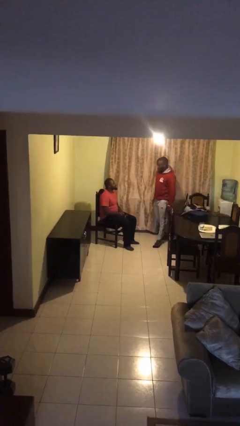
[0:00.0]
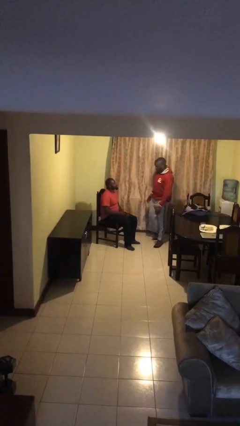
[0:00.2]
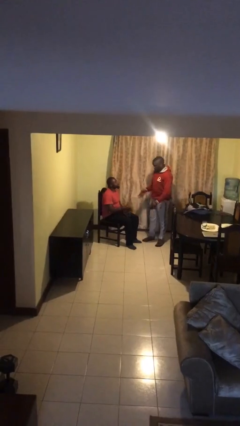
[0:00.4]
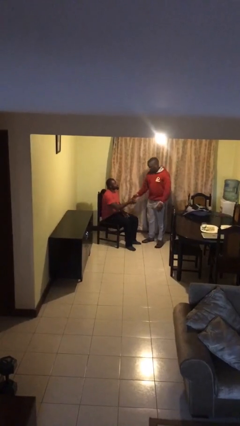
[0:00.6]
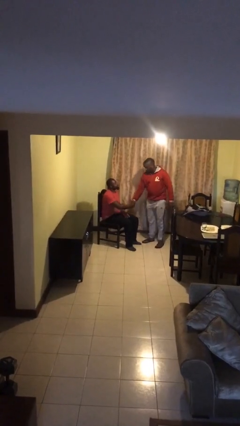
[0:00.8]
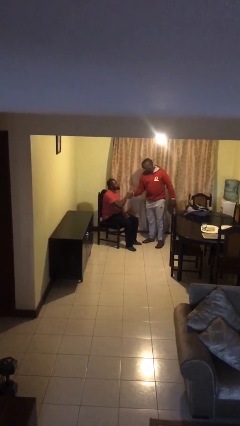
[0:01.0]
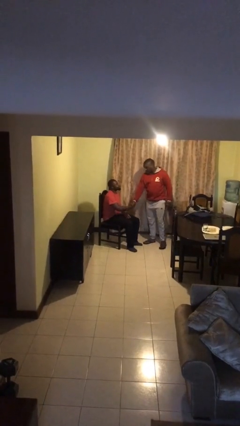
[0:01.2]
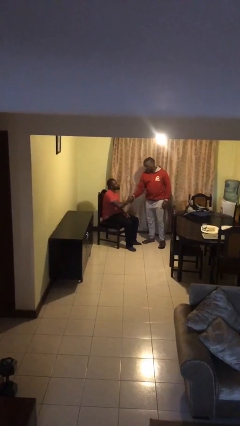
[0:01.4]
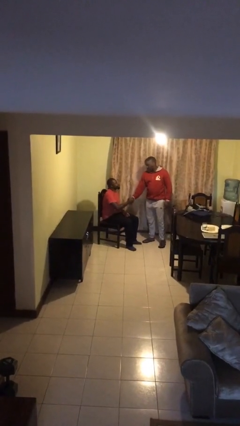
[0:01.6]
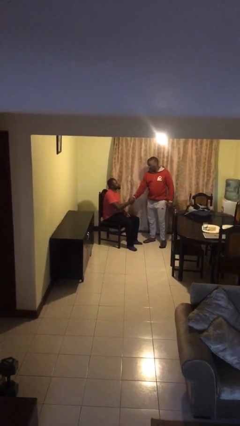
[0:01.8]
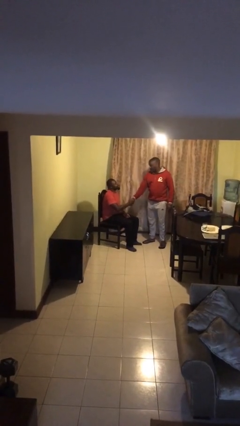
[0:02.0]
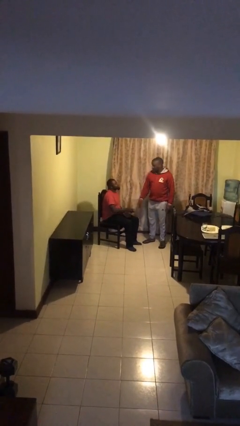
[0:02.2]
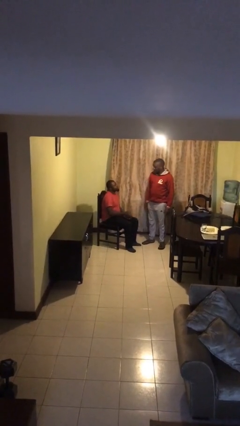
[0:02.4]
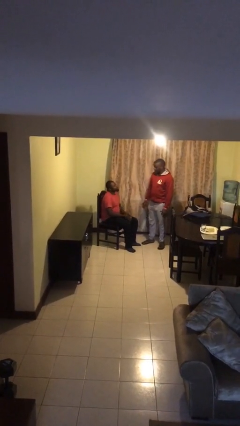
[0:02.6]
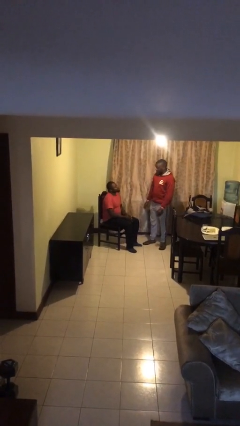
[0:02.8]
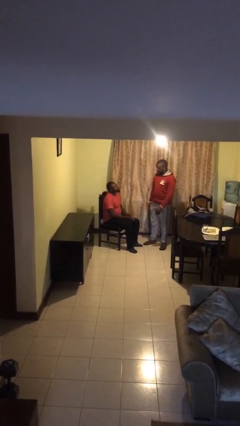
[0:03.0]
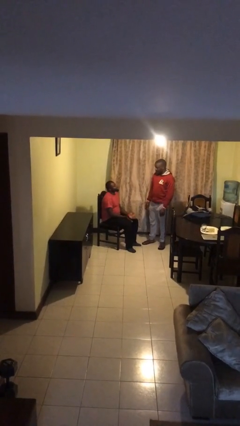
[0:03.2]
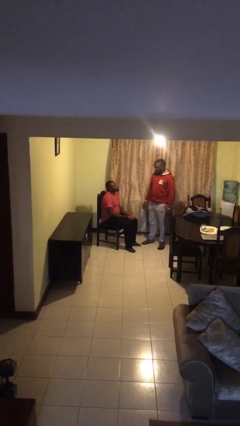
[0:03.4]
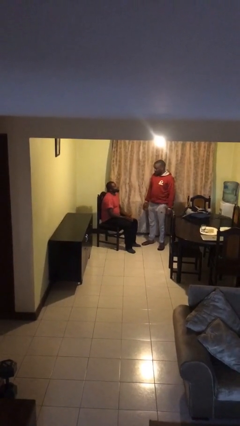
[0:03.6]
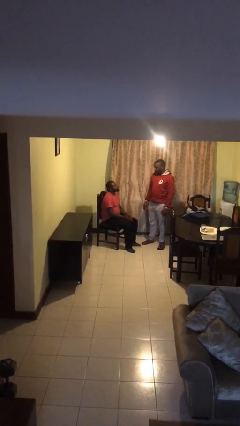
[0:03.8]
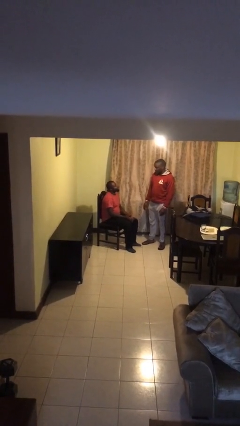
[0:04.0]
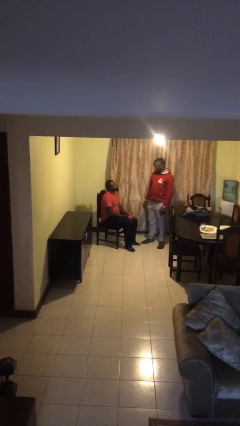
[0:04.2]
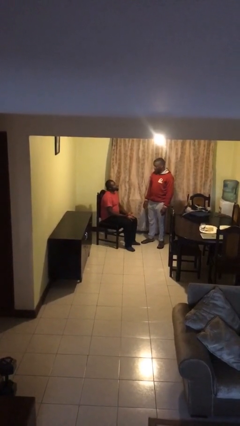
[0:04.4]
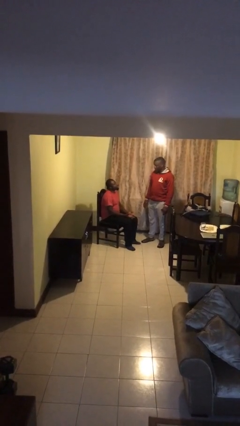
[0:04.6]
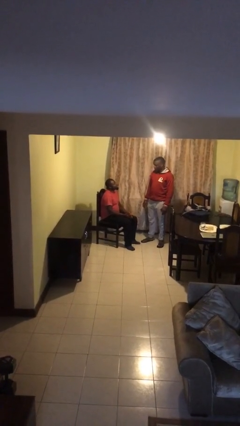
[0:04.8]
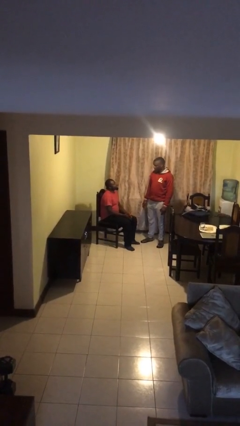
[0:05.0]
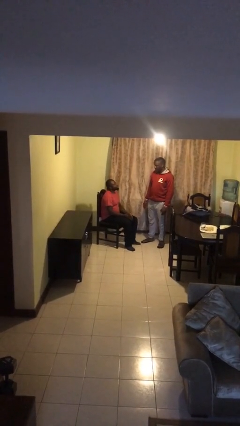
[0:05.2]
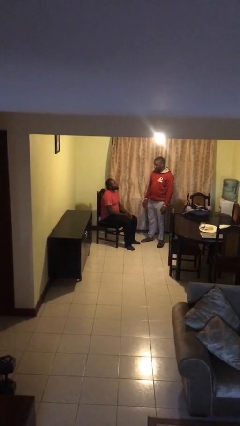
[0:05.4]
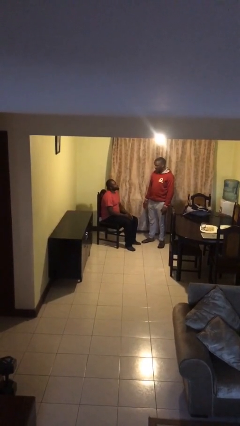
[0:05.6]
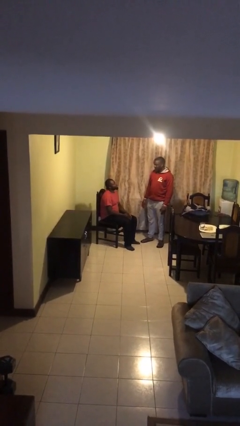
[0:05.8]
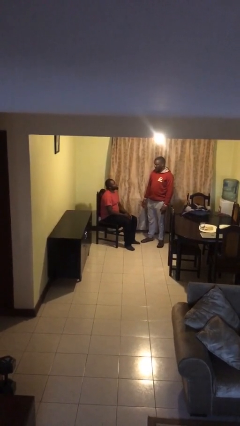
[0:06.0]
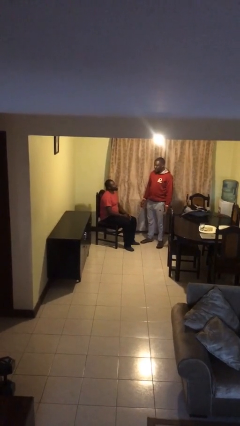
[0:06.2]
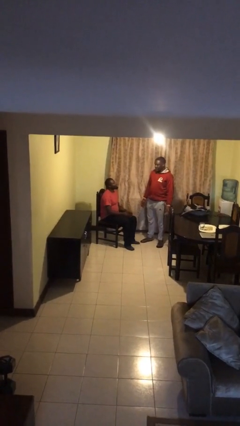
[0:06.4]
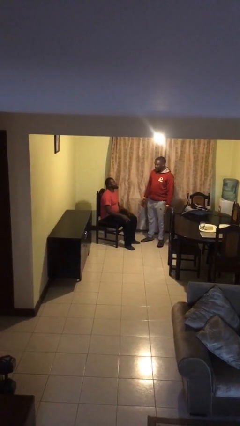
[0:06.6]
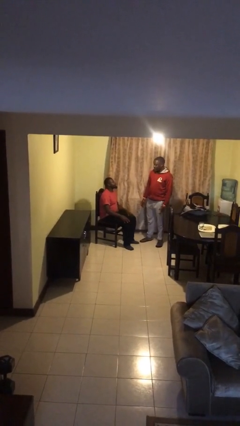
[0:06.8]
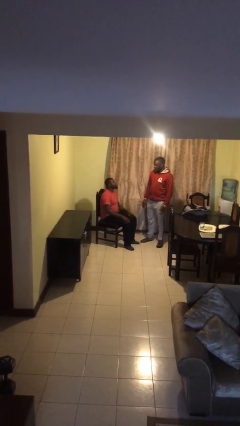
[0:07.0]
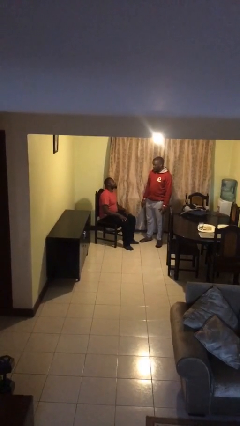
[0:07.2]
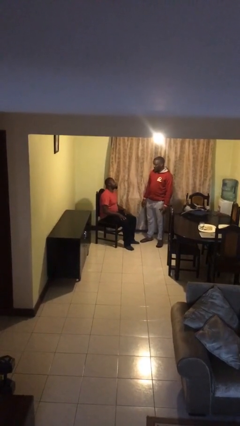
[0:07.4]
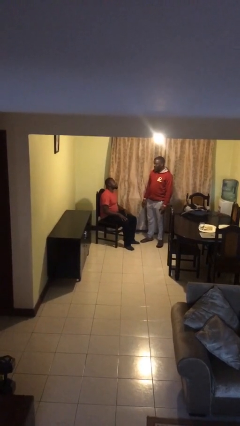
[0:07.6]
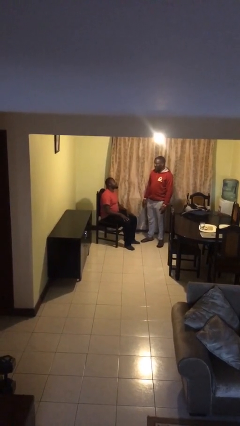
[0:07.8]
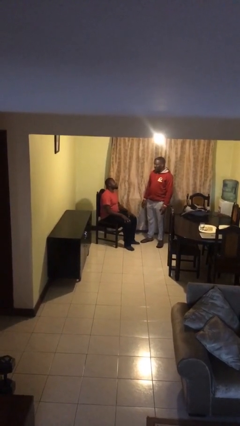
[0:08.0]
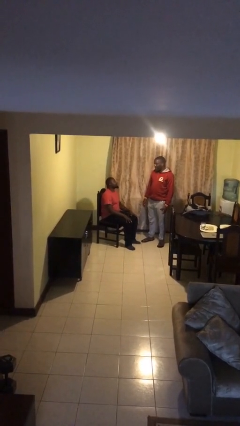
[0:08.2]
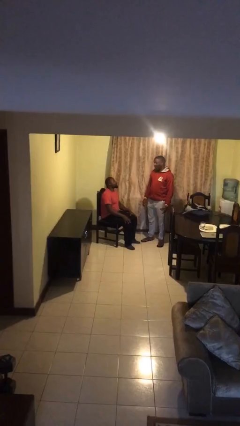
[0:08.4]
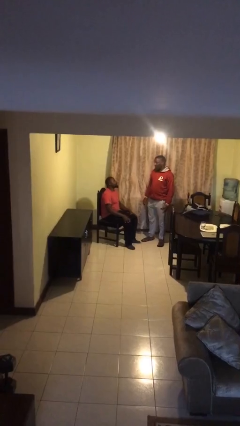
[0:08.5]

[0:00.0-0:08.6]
person shakes hand

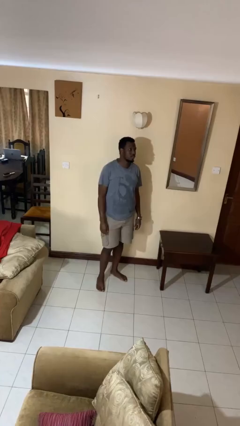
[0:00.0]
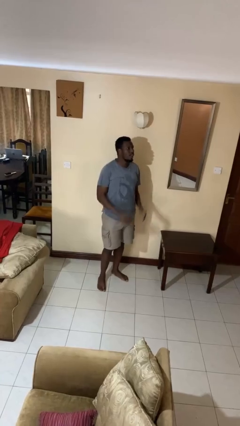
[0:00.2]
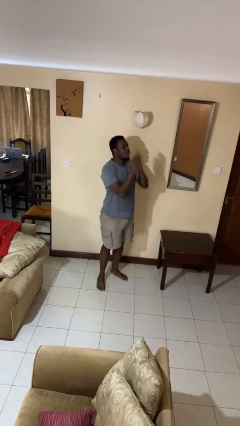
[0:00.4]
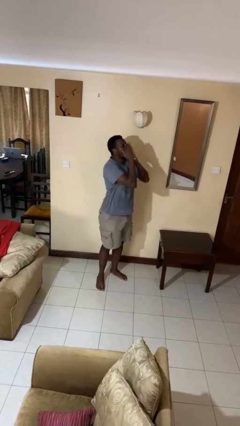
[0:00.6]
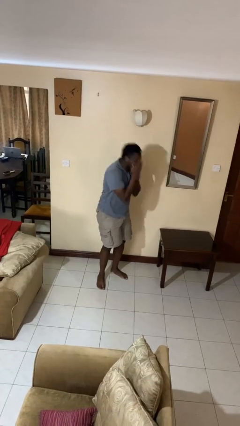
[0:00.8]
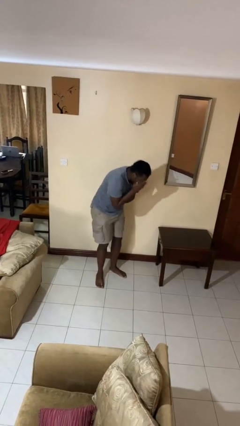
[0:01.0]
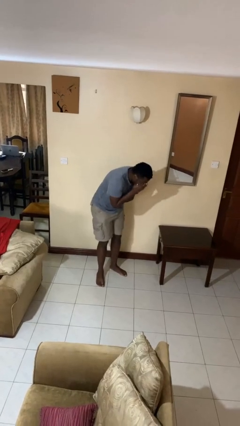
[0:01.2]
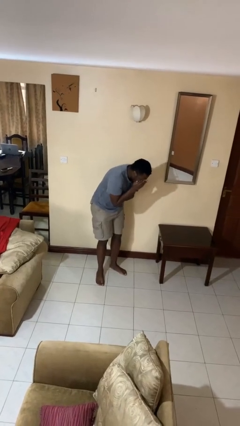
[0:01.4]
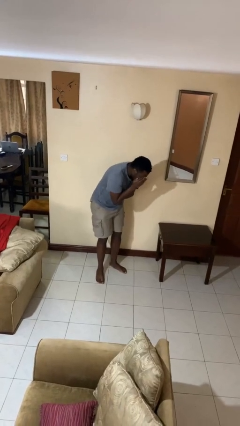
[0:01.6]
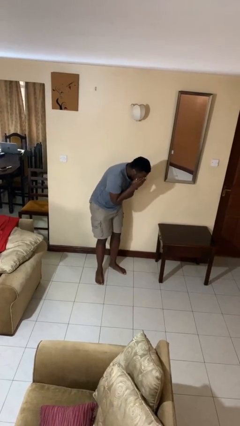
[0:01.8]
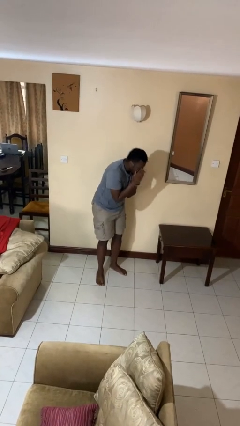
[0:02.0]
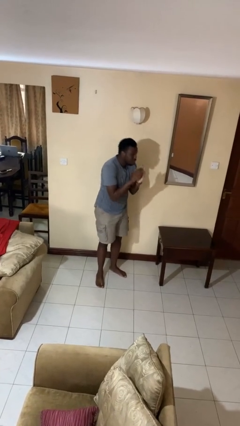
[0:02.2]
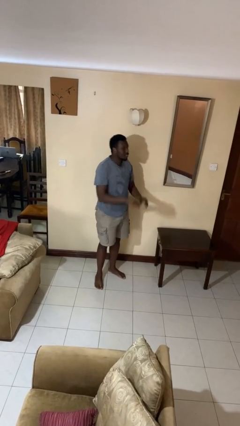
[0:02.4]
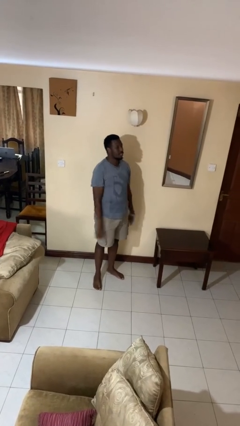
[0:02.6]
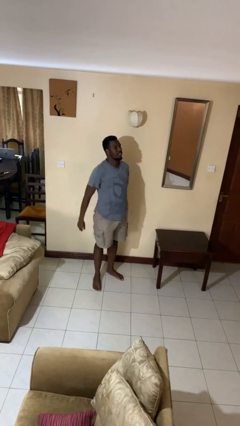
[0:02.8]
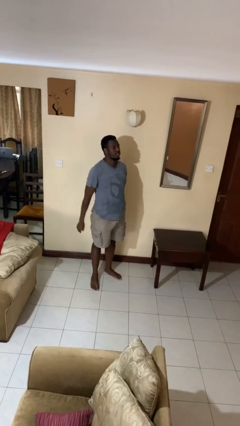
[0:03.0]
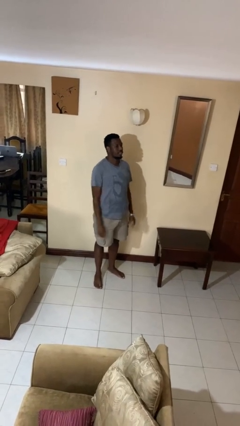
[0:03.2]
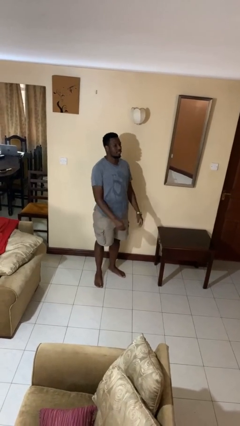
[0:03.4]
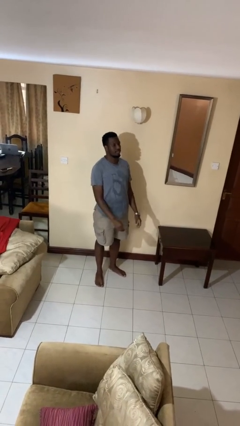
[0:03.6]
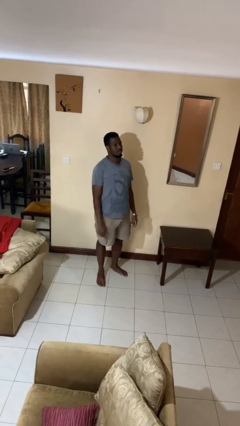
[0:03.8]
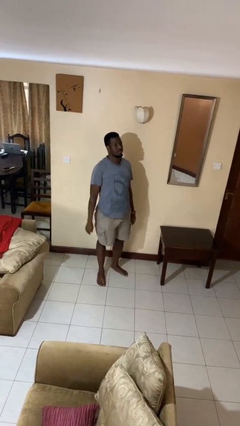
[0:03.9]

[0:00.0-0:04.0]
person sneezes into hand

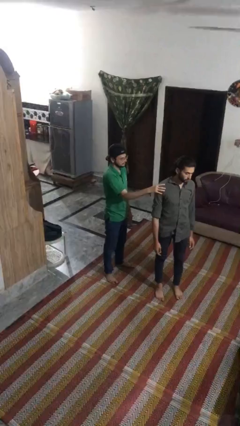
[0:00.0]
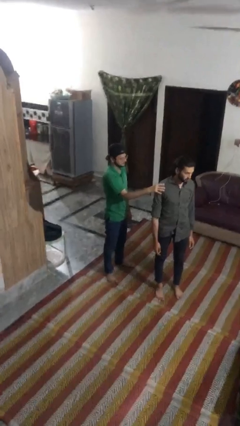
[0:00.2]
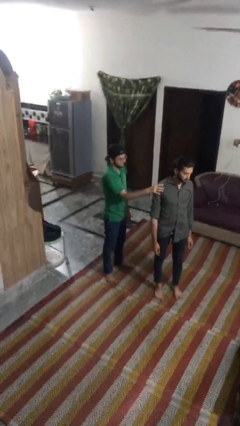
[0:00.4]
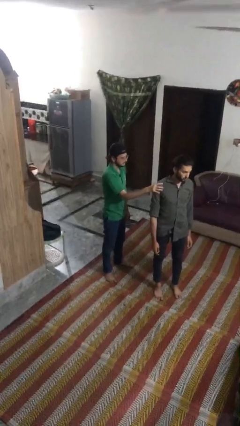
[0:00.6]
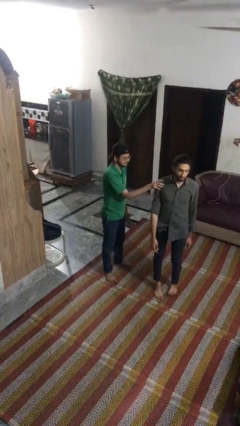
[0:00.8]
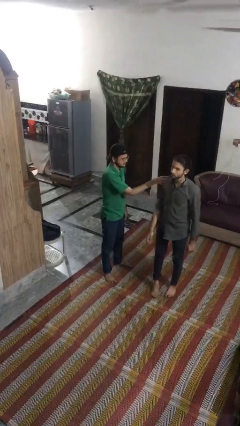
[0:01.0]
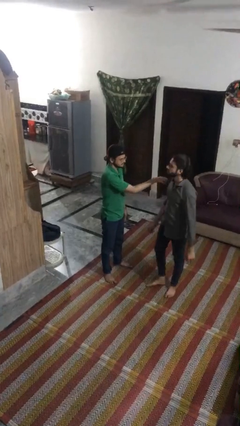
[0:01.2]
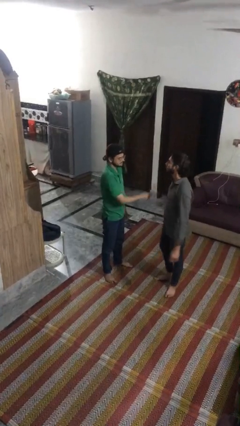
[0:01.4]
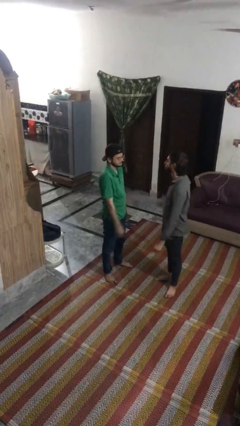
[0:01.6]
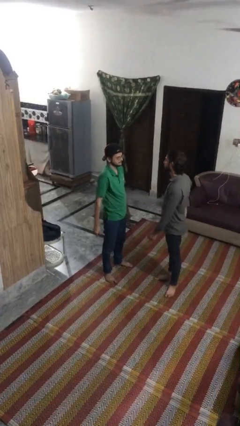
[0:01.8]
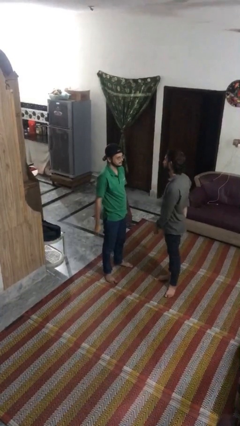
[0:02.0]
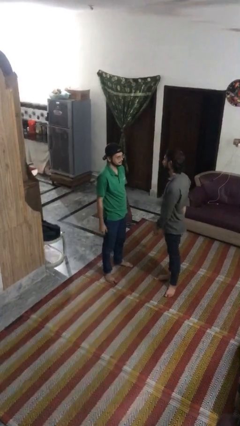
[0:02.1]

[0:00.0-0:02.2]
person spins person around

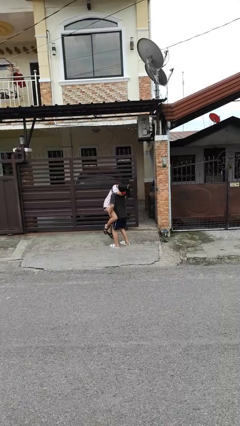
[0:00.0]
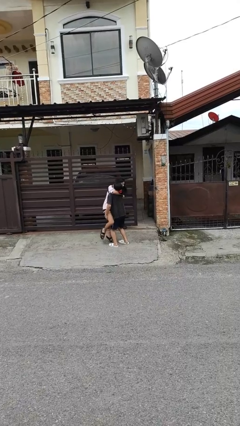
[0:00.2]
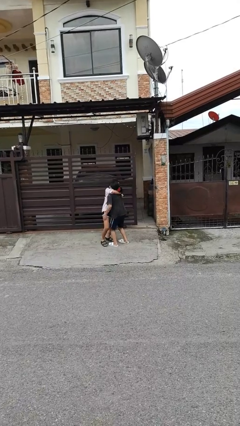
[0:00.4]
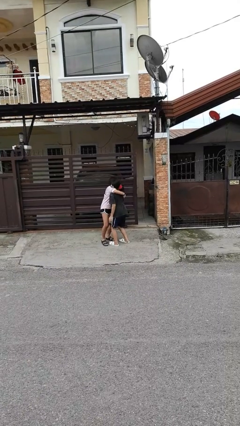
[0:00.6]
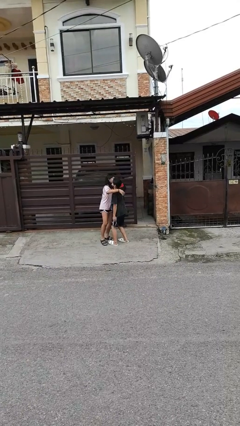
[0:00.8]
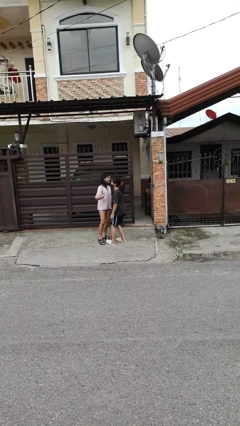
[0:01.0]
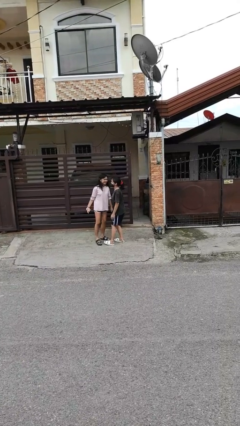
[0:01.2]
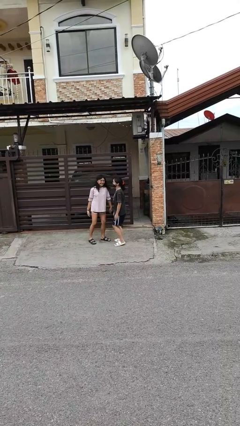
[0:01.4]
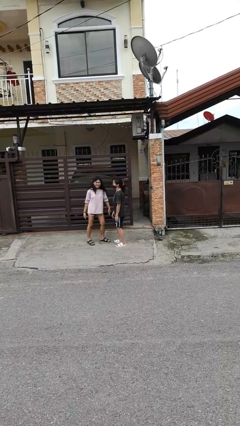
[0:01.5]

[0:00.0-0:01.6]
person puts down person

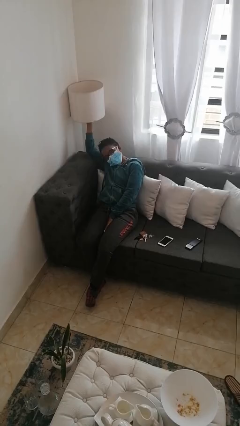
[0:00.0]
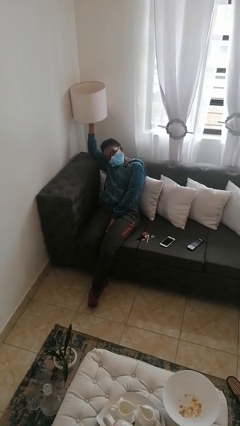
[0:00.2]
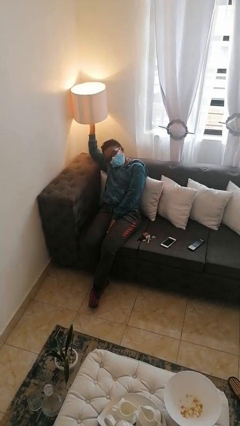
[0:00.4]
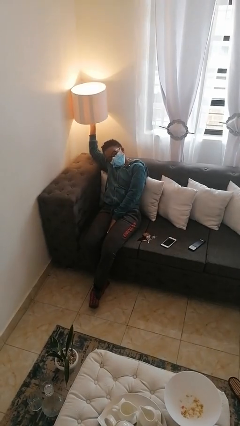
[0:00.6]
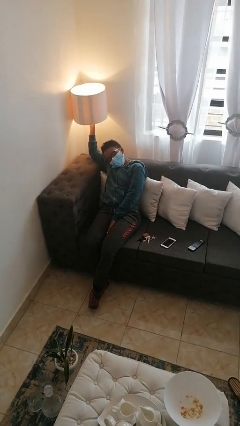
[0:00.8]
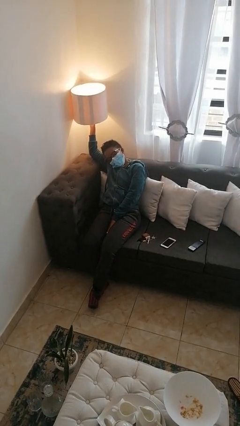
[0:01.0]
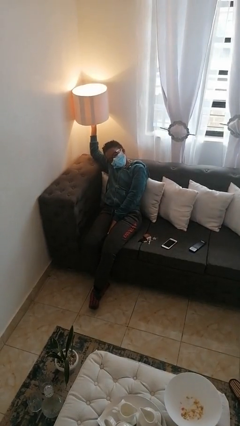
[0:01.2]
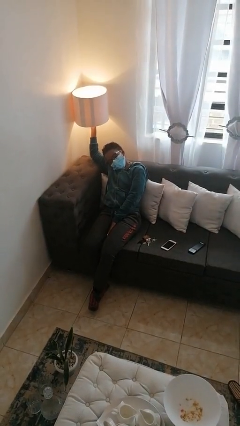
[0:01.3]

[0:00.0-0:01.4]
person turns on lamp
